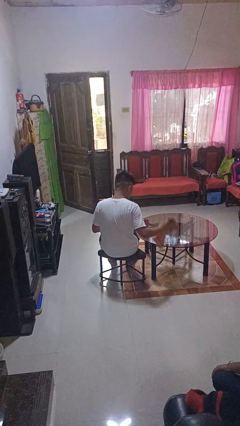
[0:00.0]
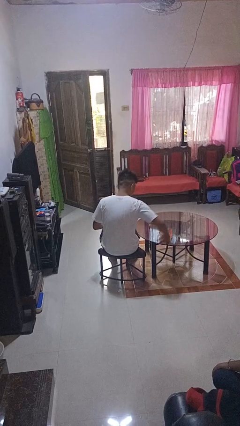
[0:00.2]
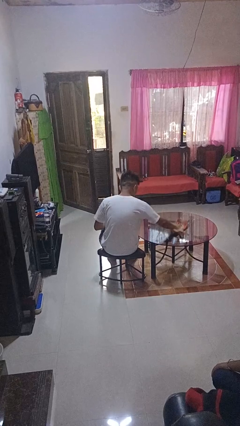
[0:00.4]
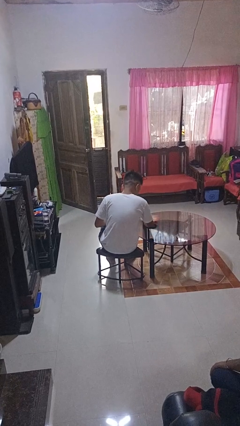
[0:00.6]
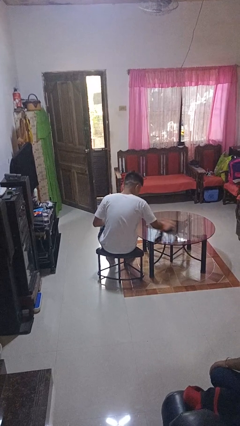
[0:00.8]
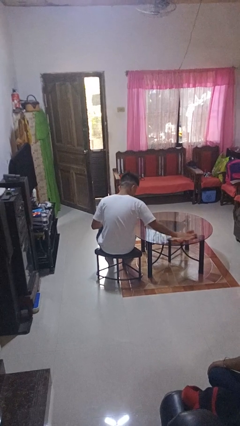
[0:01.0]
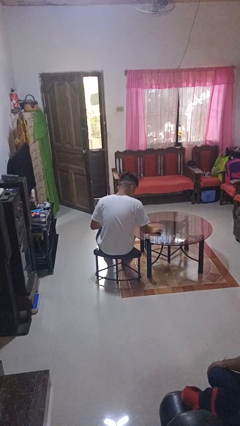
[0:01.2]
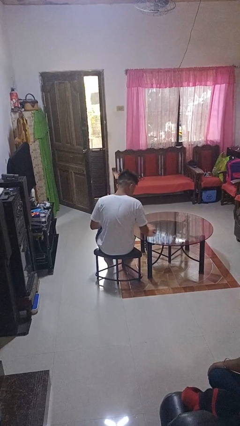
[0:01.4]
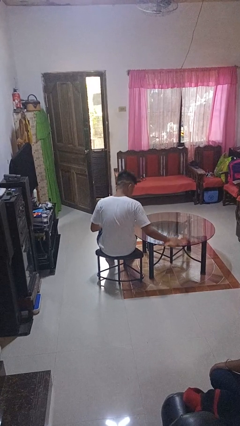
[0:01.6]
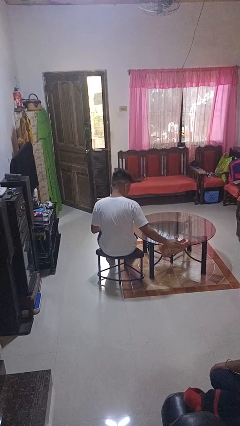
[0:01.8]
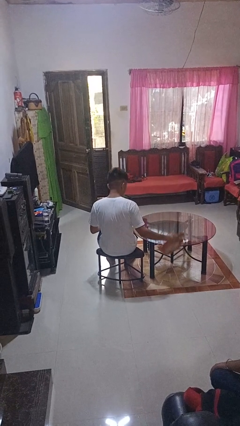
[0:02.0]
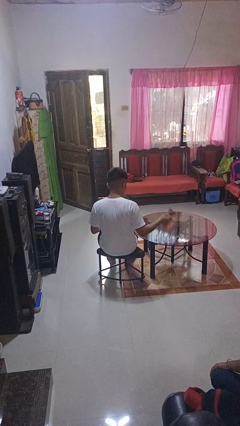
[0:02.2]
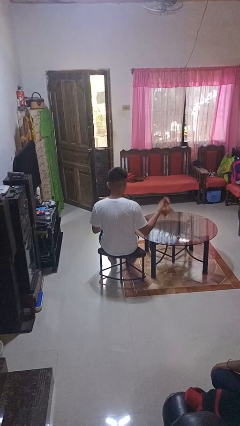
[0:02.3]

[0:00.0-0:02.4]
person cleans table with rag

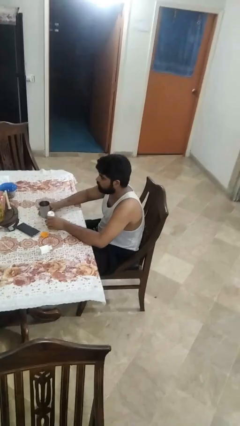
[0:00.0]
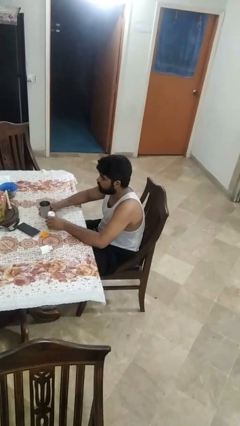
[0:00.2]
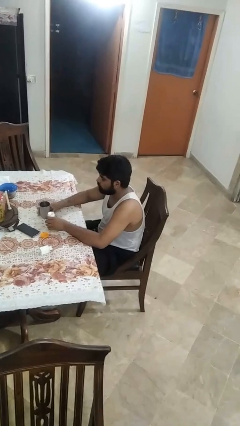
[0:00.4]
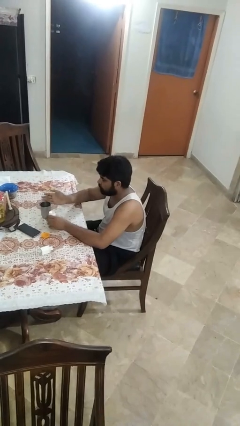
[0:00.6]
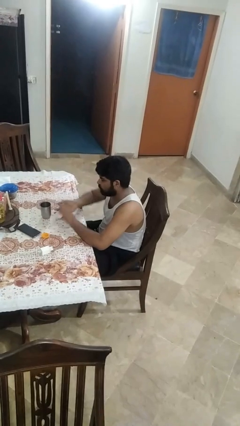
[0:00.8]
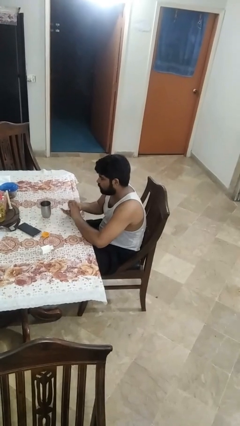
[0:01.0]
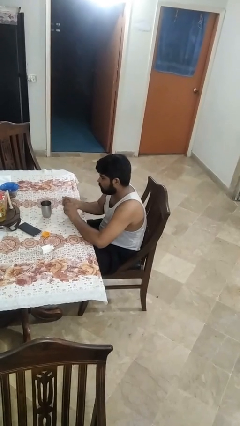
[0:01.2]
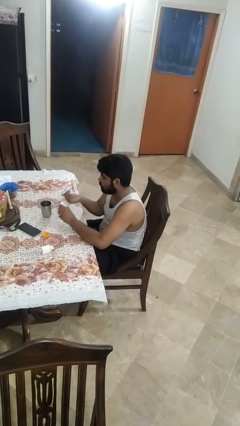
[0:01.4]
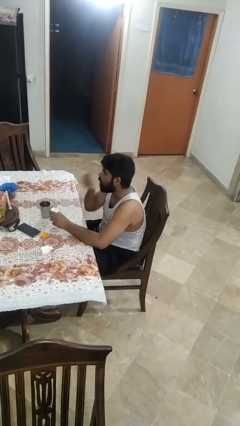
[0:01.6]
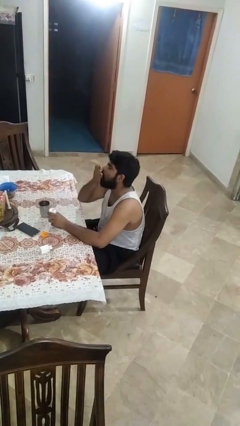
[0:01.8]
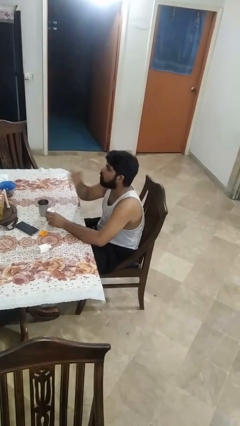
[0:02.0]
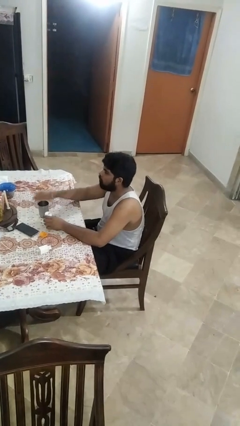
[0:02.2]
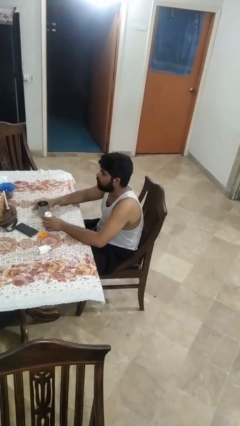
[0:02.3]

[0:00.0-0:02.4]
person takes medicine pills

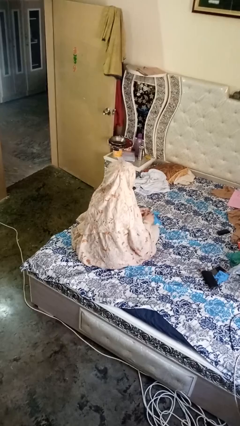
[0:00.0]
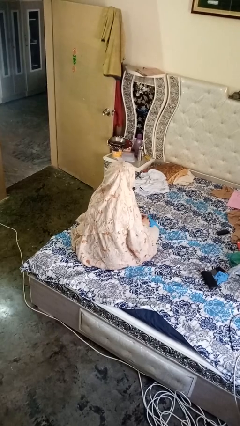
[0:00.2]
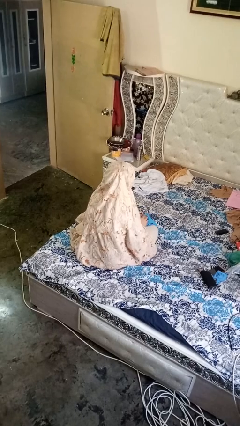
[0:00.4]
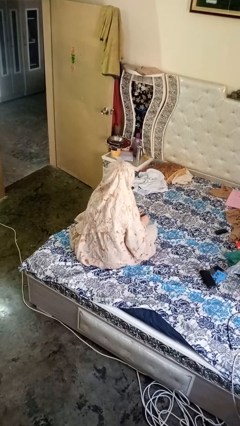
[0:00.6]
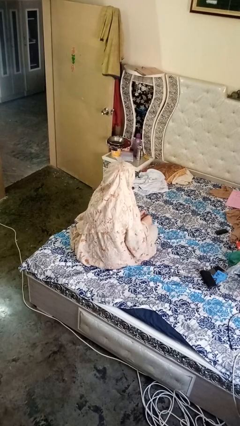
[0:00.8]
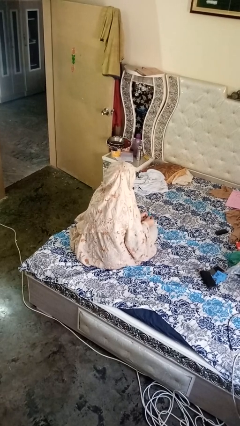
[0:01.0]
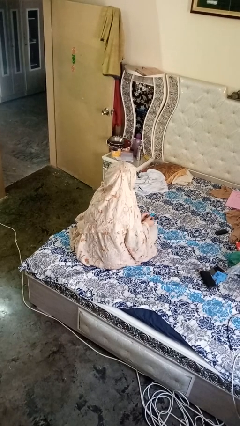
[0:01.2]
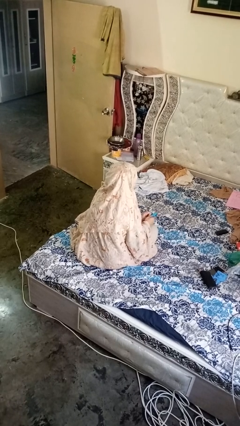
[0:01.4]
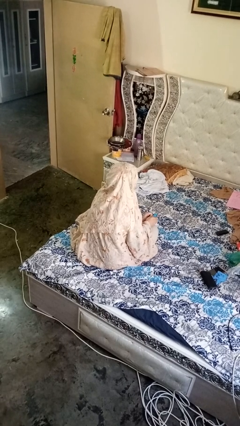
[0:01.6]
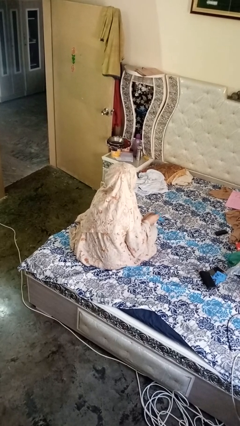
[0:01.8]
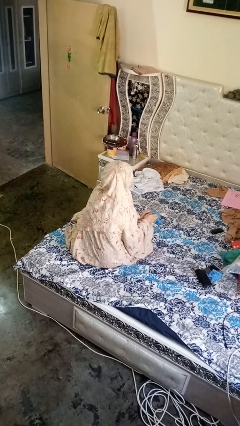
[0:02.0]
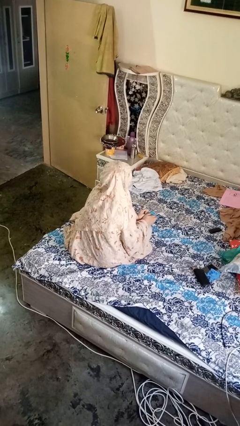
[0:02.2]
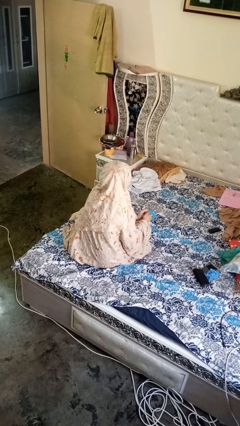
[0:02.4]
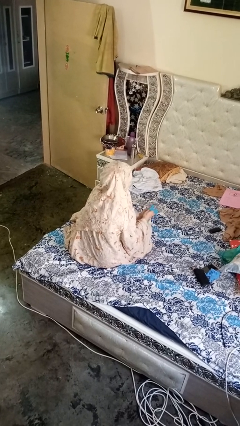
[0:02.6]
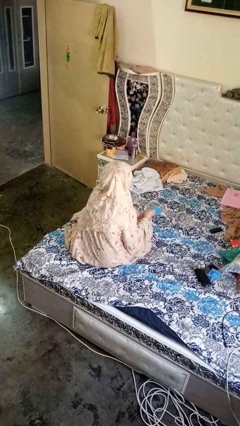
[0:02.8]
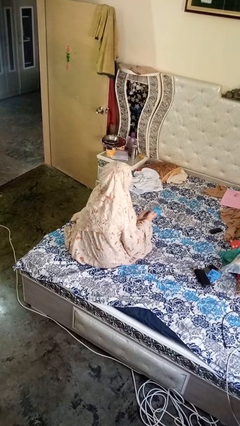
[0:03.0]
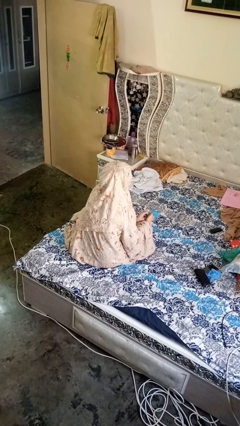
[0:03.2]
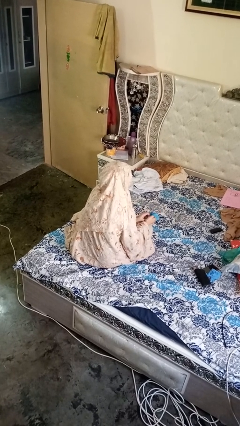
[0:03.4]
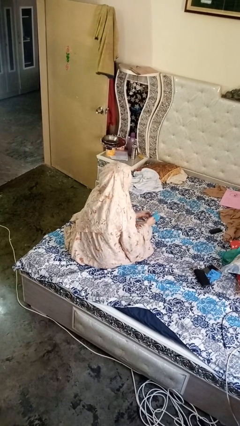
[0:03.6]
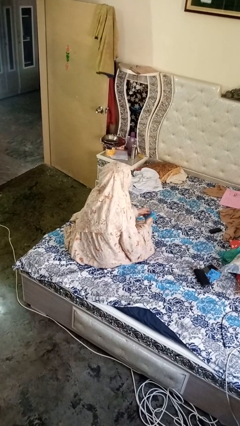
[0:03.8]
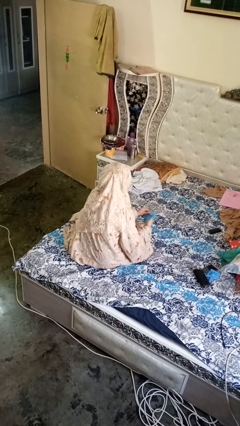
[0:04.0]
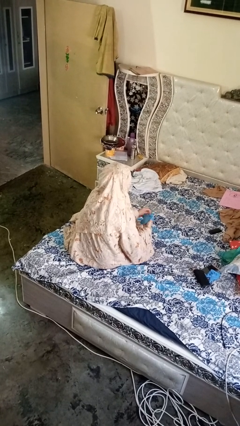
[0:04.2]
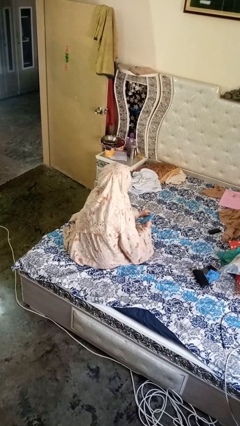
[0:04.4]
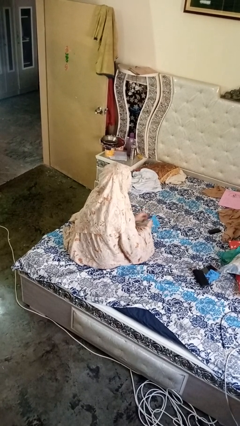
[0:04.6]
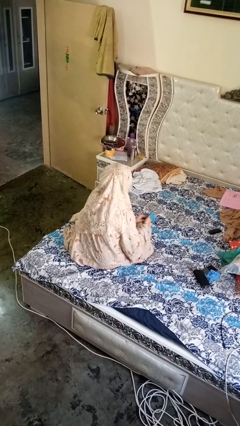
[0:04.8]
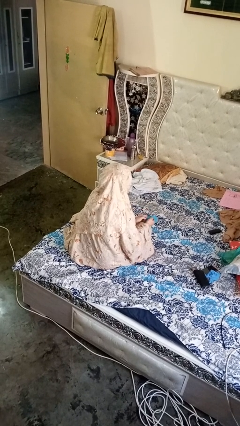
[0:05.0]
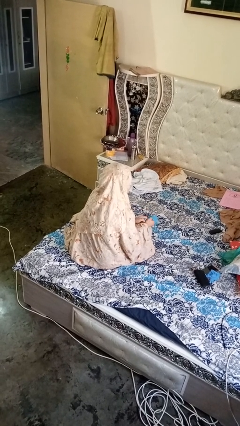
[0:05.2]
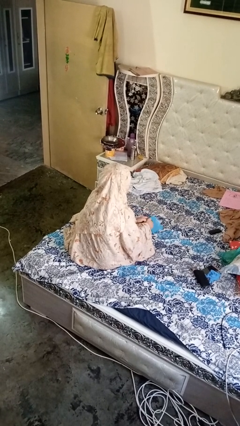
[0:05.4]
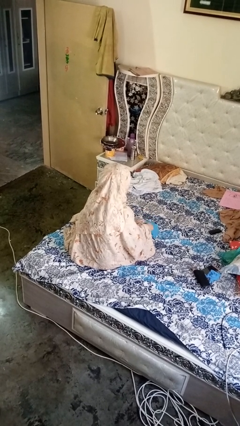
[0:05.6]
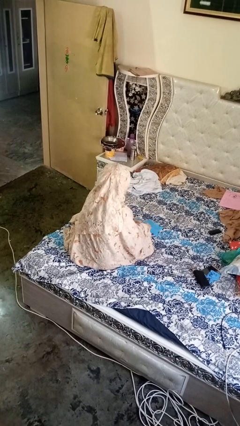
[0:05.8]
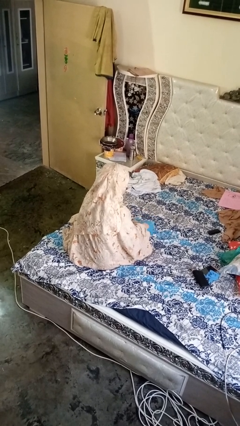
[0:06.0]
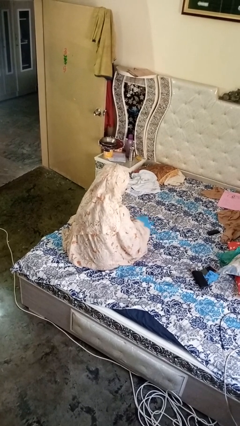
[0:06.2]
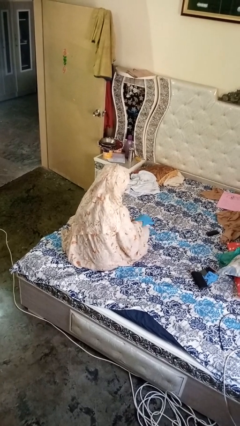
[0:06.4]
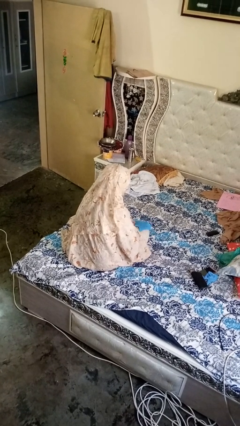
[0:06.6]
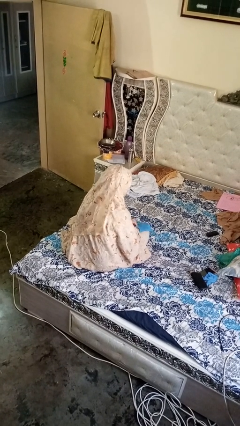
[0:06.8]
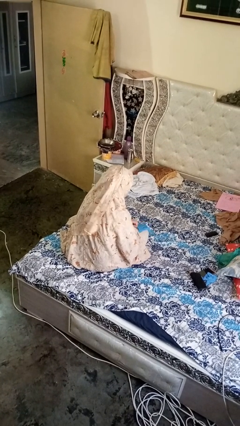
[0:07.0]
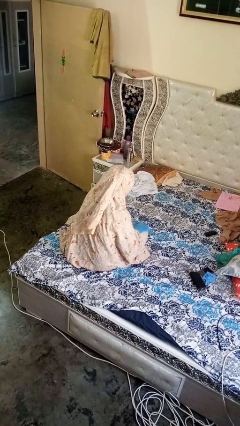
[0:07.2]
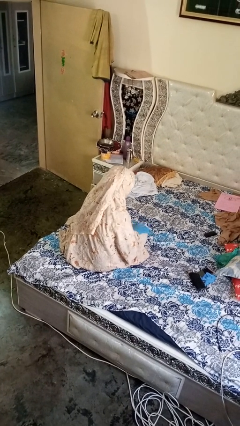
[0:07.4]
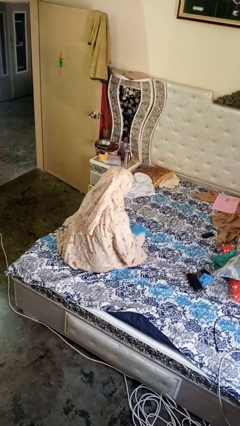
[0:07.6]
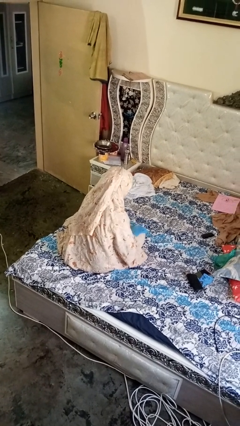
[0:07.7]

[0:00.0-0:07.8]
person puts on gloves

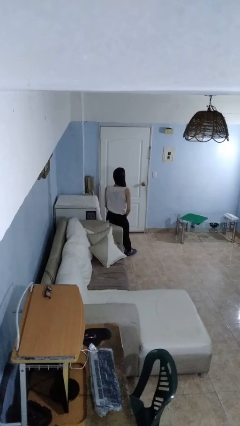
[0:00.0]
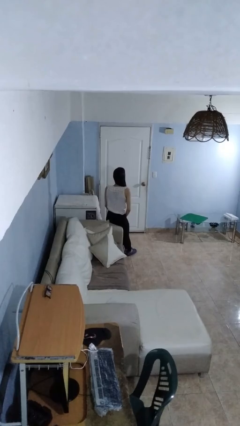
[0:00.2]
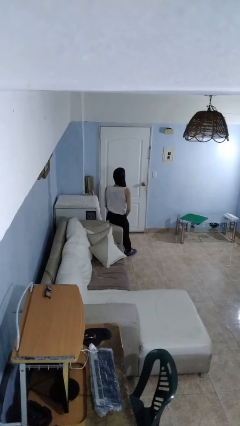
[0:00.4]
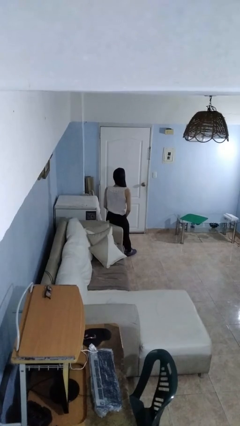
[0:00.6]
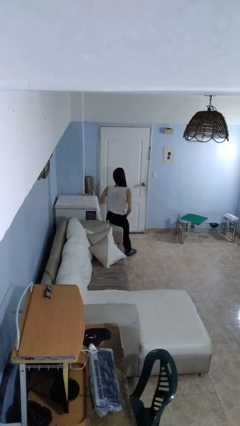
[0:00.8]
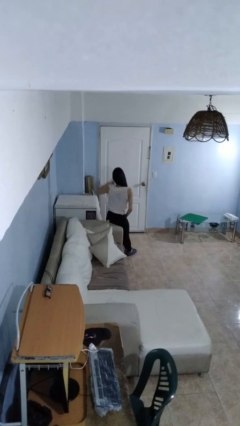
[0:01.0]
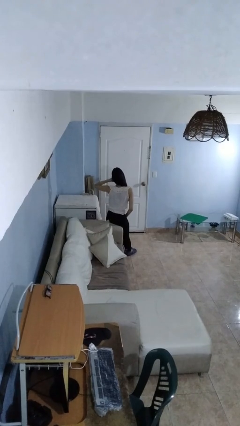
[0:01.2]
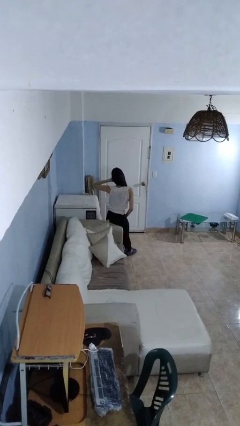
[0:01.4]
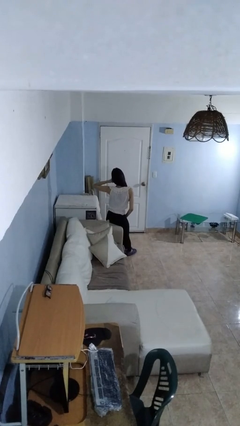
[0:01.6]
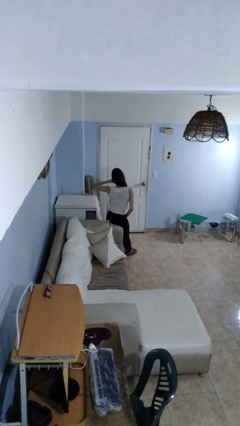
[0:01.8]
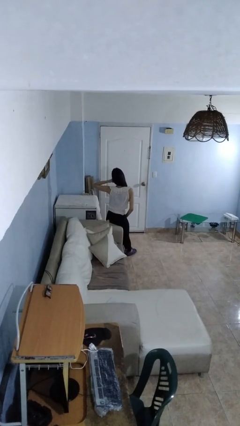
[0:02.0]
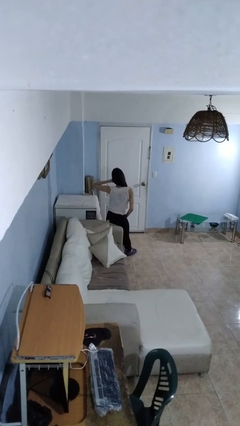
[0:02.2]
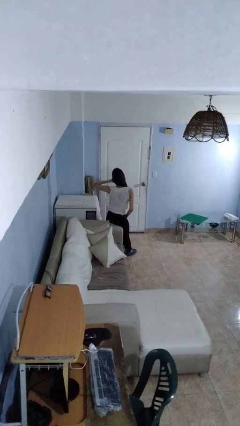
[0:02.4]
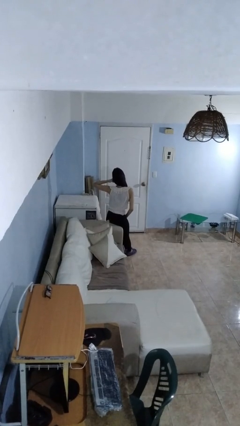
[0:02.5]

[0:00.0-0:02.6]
person gestures call me

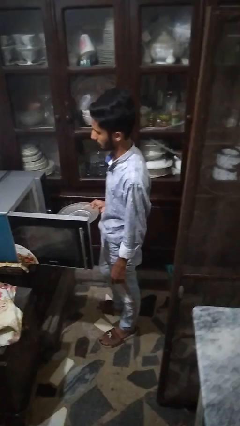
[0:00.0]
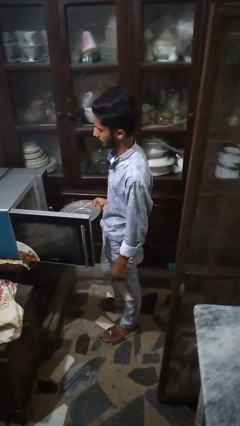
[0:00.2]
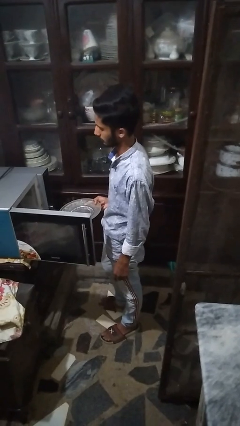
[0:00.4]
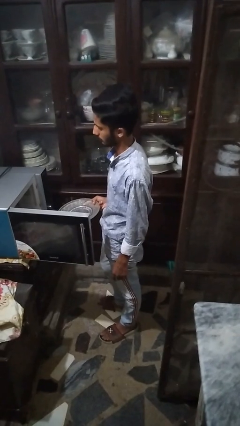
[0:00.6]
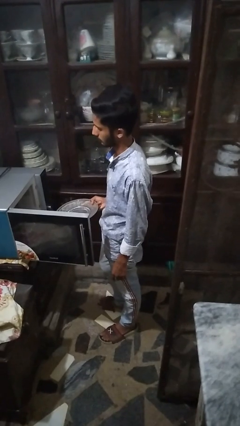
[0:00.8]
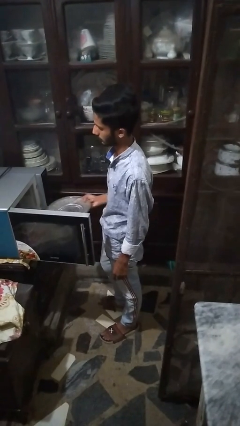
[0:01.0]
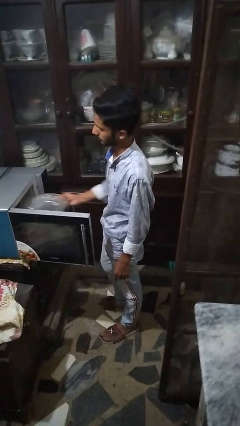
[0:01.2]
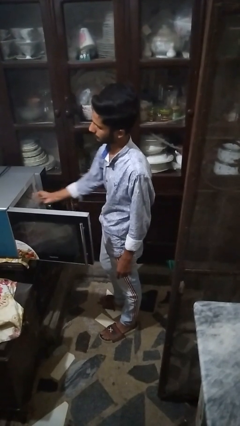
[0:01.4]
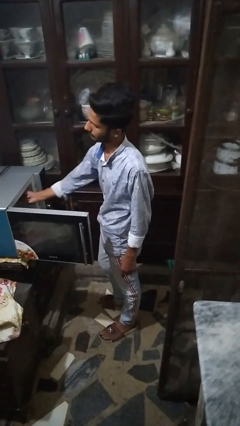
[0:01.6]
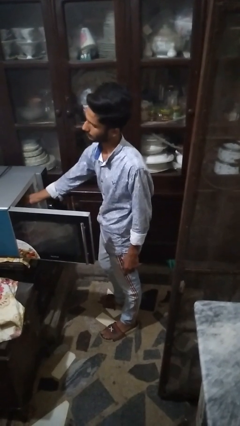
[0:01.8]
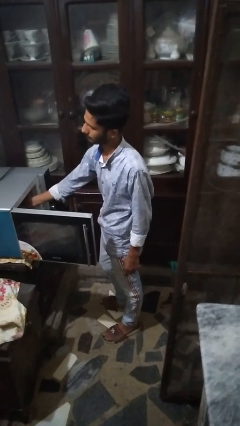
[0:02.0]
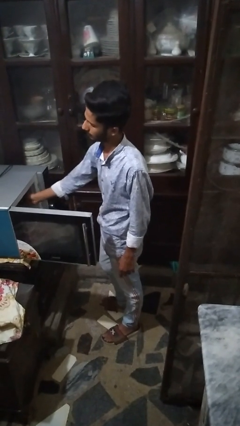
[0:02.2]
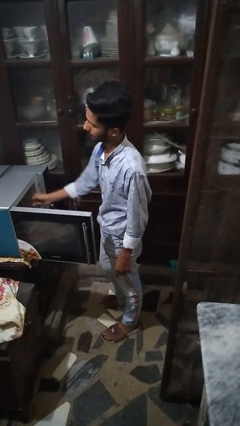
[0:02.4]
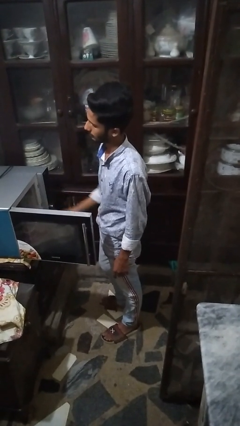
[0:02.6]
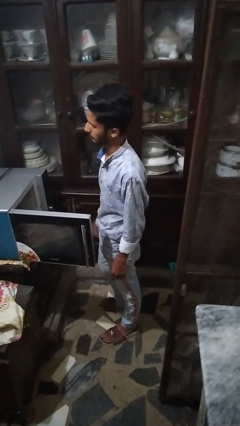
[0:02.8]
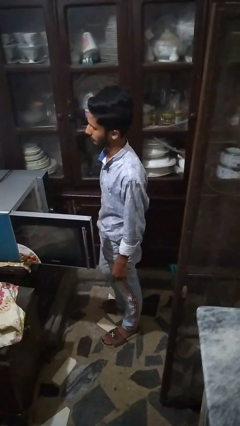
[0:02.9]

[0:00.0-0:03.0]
person puts object into microwave
